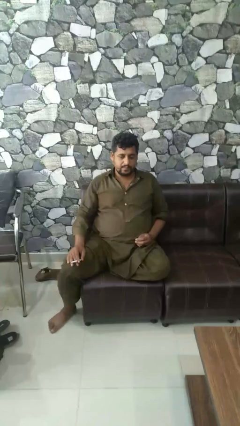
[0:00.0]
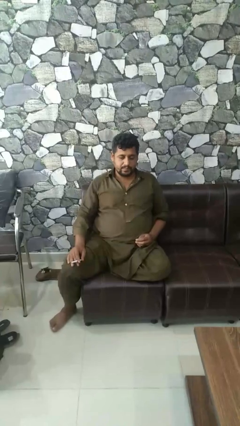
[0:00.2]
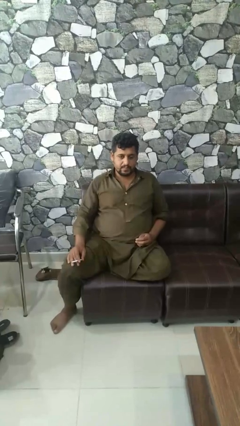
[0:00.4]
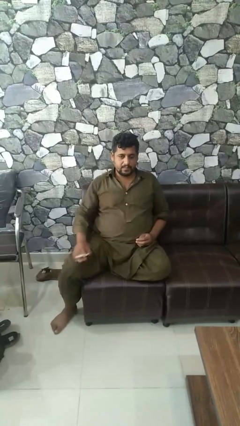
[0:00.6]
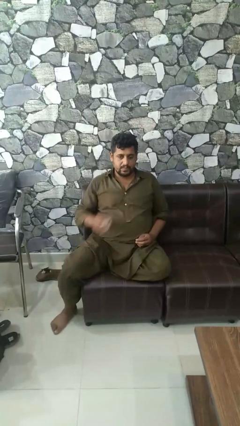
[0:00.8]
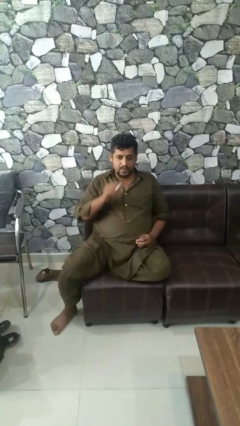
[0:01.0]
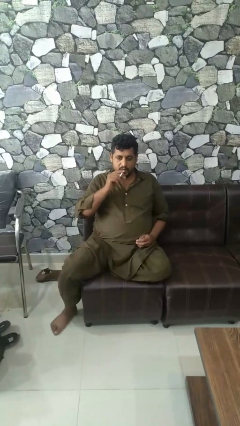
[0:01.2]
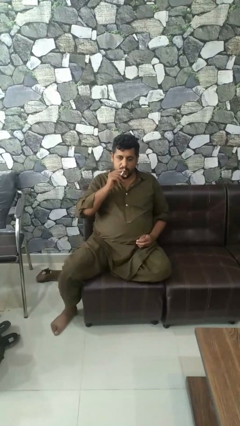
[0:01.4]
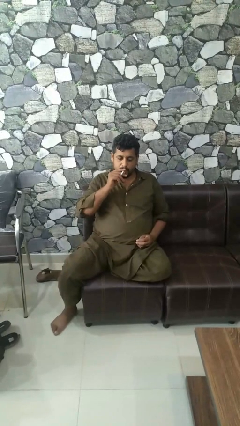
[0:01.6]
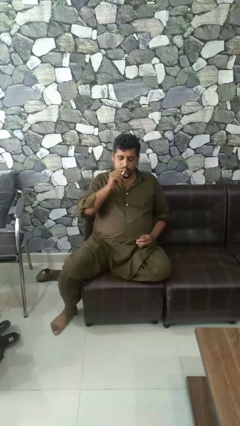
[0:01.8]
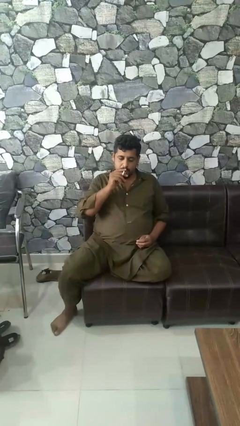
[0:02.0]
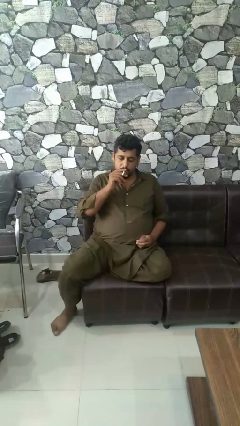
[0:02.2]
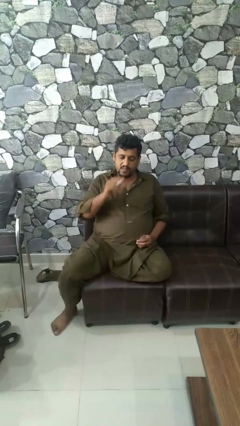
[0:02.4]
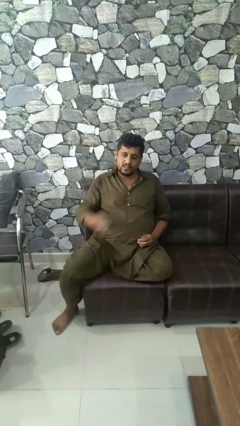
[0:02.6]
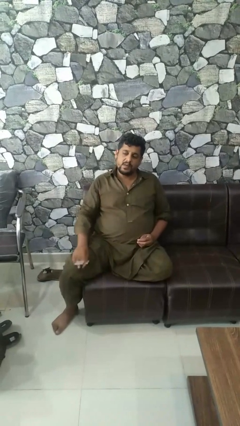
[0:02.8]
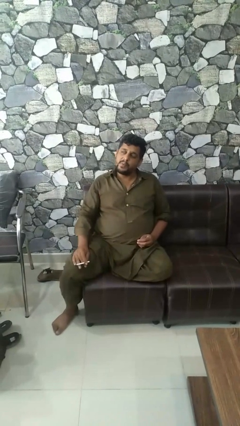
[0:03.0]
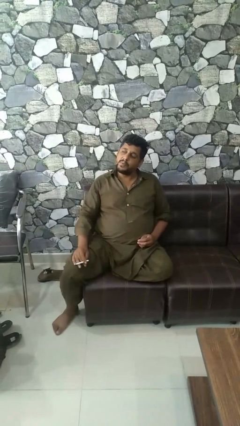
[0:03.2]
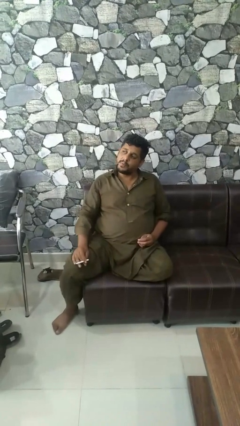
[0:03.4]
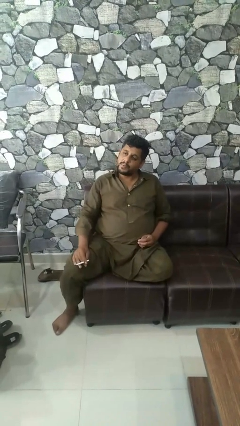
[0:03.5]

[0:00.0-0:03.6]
person vapes

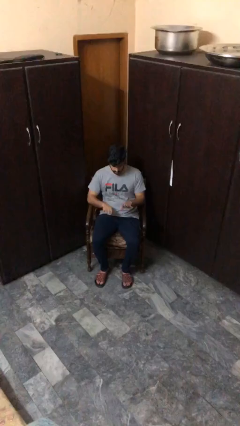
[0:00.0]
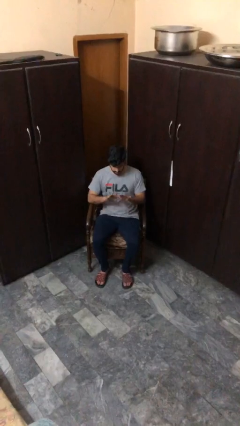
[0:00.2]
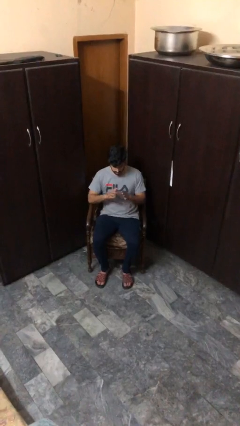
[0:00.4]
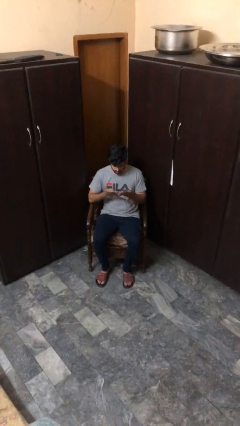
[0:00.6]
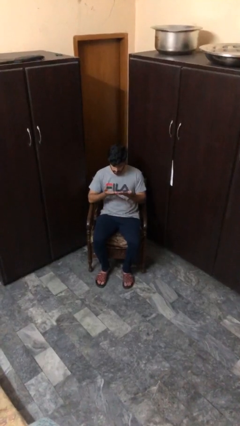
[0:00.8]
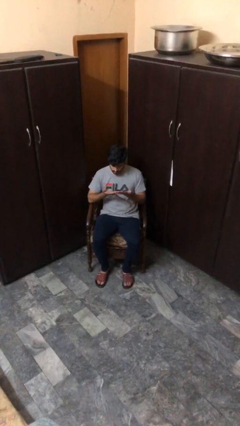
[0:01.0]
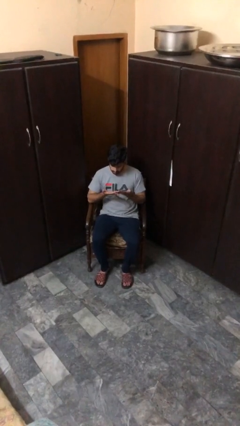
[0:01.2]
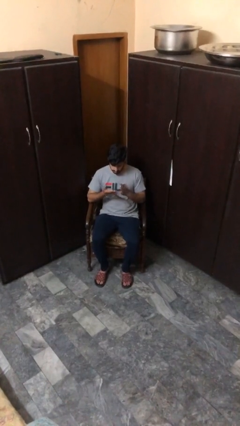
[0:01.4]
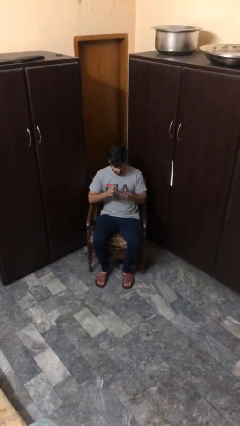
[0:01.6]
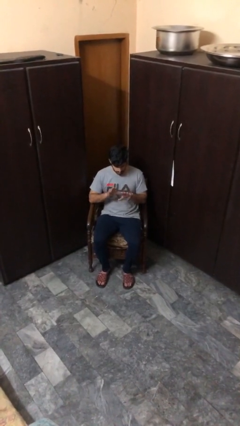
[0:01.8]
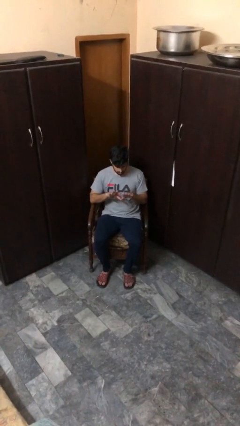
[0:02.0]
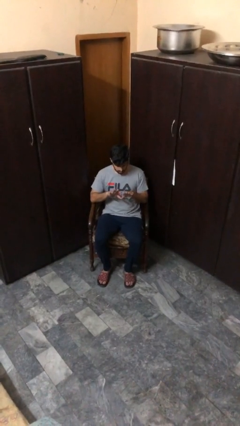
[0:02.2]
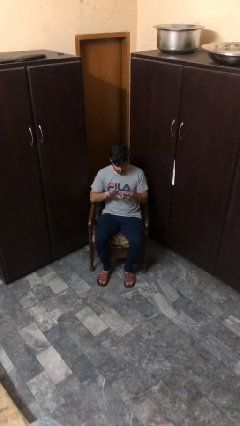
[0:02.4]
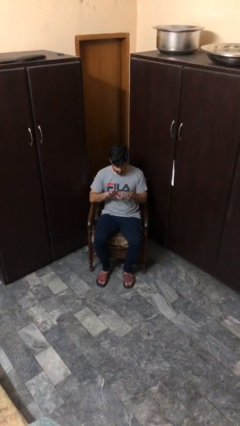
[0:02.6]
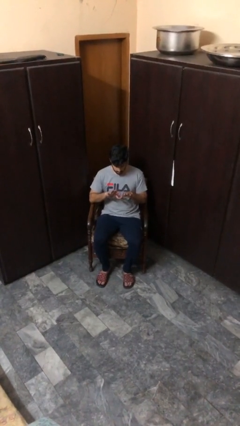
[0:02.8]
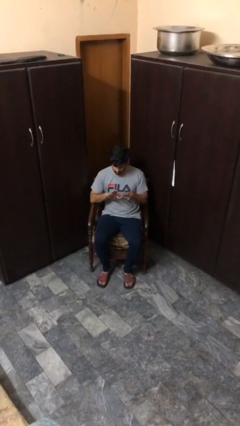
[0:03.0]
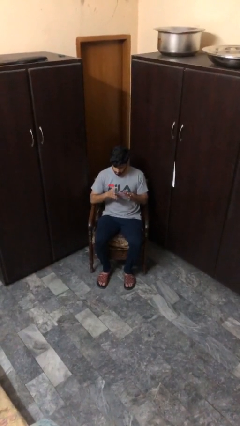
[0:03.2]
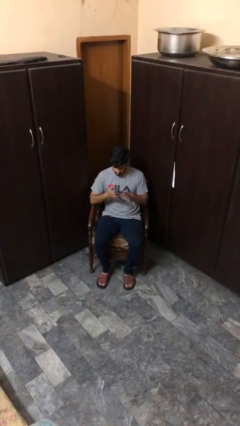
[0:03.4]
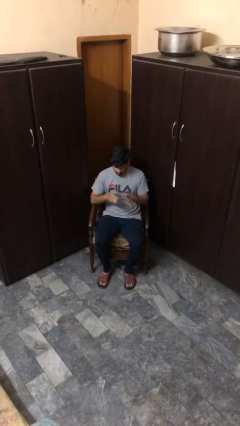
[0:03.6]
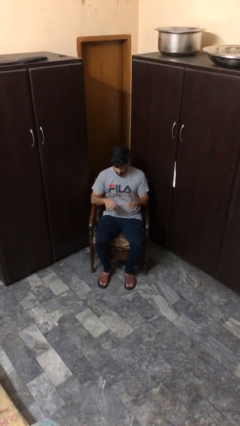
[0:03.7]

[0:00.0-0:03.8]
person looks at hands in lap

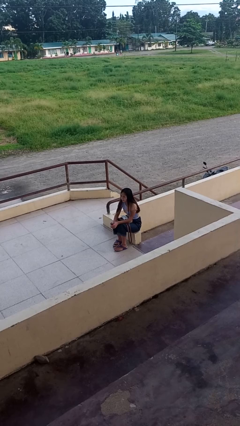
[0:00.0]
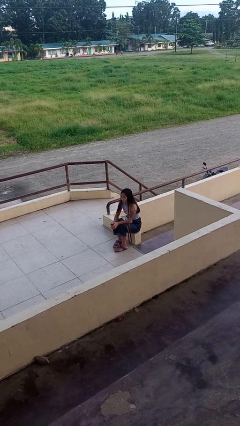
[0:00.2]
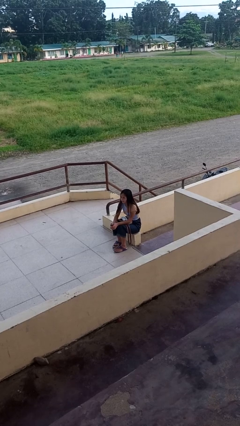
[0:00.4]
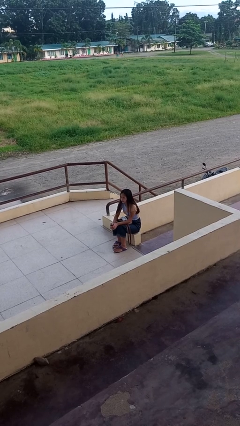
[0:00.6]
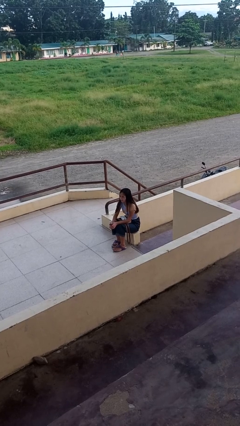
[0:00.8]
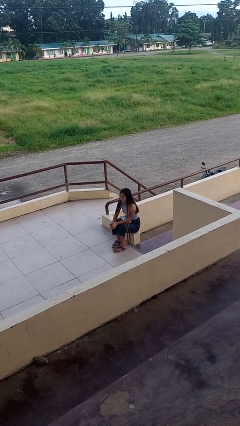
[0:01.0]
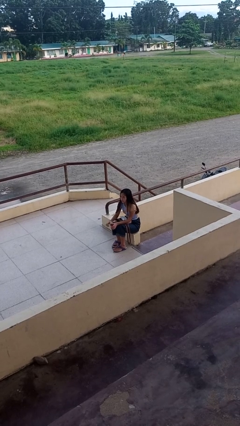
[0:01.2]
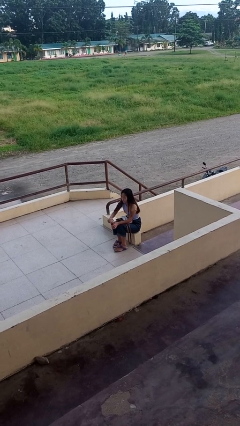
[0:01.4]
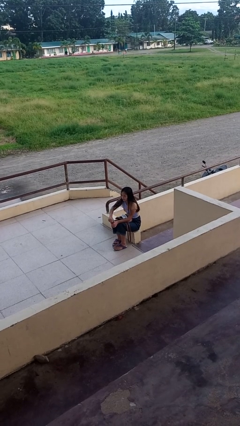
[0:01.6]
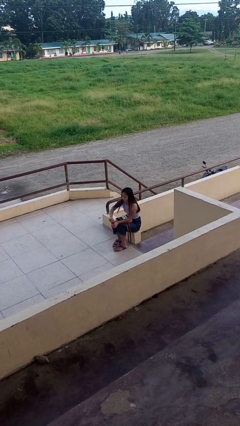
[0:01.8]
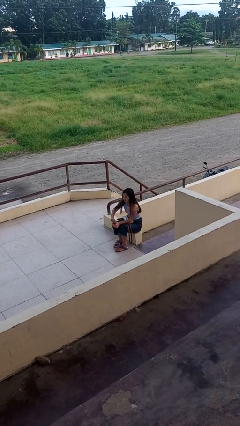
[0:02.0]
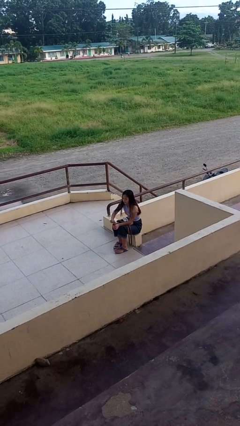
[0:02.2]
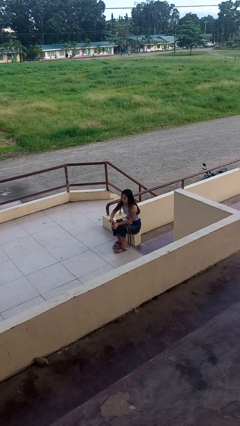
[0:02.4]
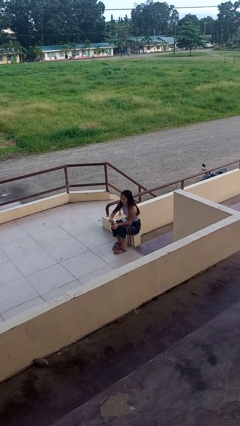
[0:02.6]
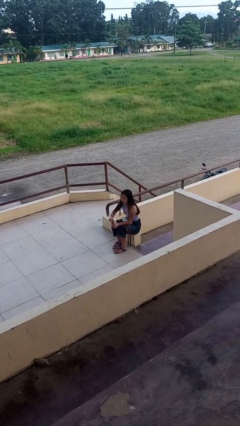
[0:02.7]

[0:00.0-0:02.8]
person opens beverage can

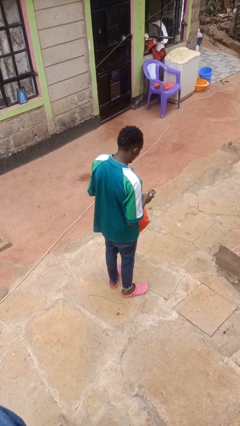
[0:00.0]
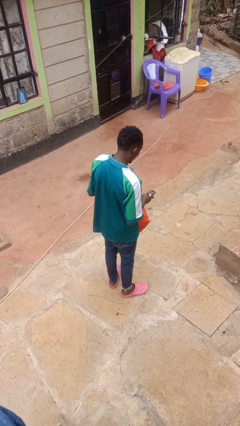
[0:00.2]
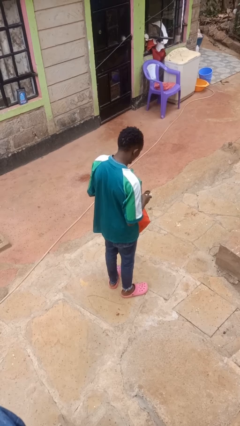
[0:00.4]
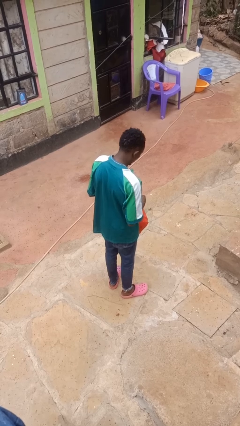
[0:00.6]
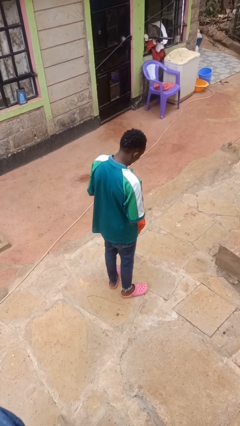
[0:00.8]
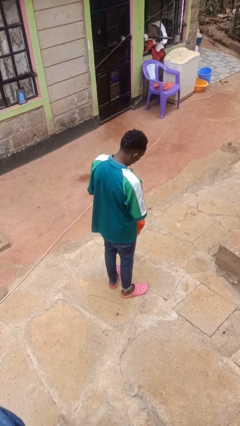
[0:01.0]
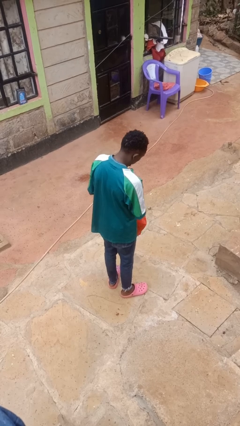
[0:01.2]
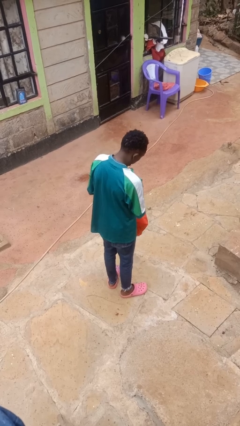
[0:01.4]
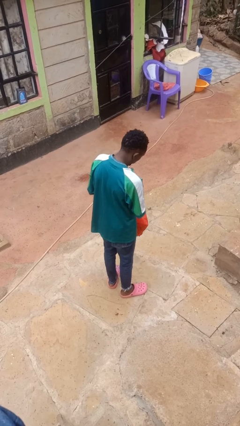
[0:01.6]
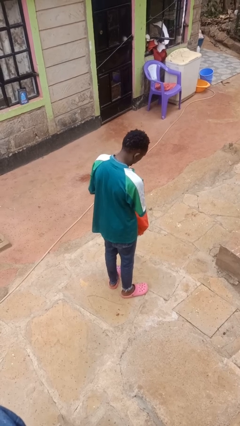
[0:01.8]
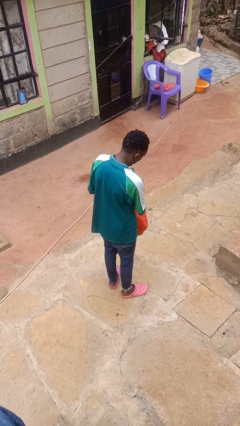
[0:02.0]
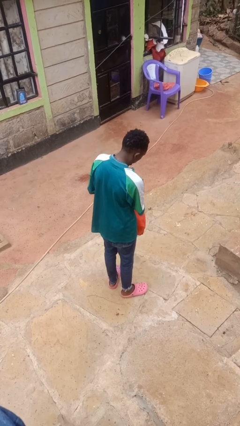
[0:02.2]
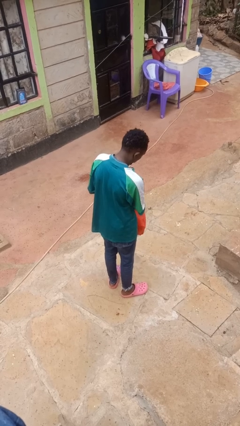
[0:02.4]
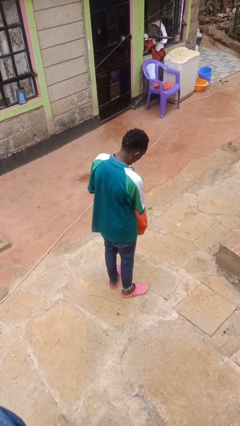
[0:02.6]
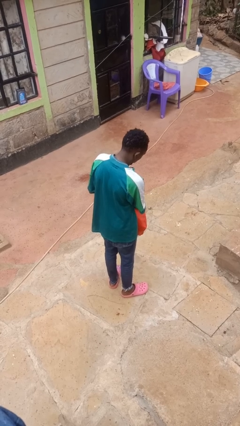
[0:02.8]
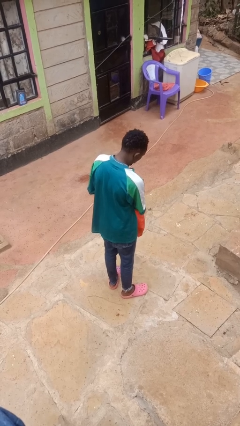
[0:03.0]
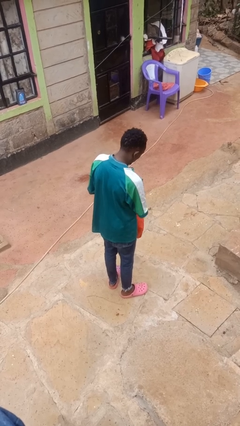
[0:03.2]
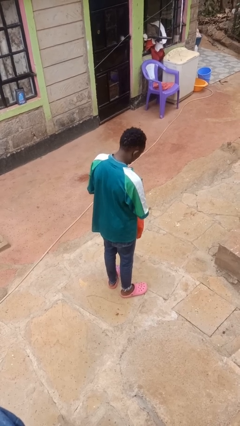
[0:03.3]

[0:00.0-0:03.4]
person puts object into bag

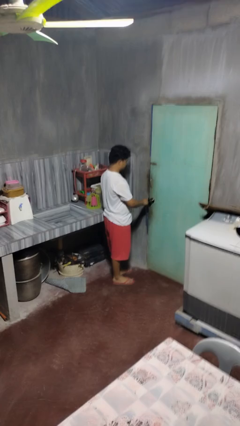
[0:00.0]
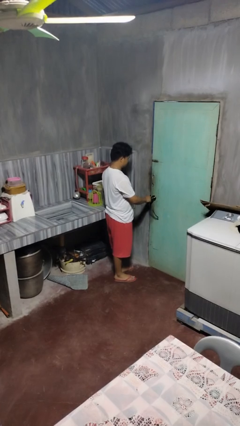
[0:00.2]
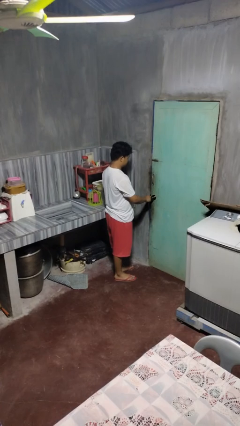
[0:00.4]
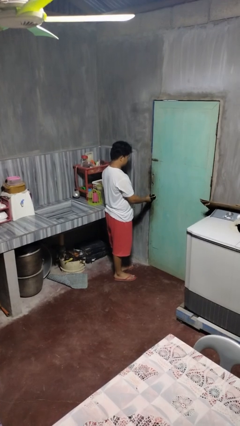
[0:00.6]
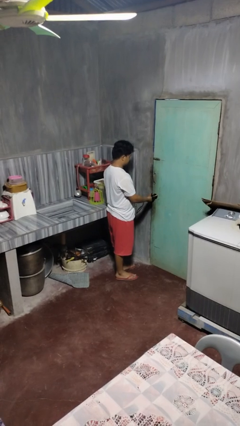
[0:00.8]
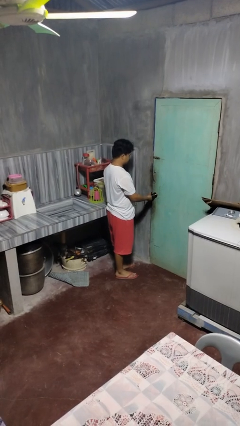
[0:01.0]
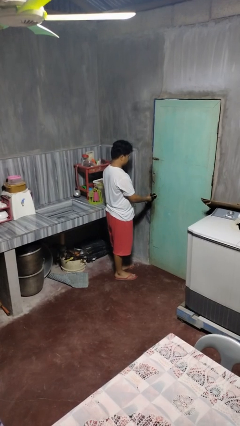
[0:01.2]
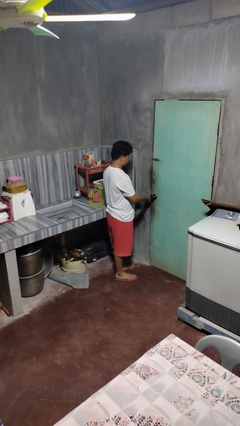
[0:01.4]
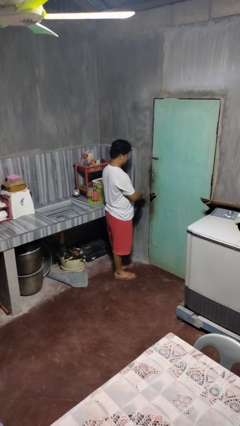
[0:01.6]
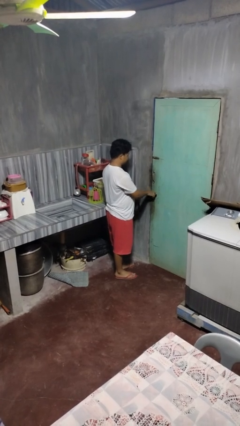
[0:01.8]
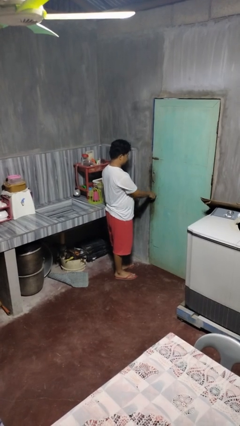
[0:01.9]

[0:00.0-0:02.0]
person unlocks door with keys

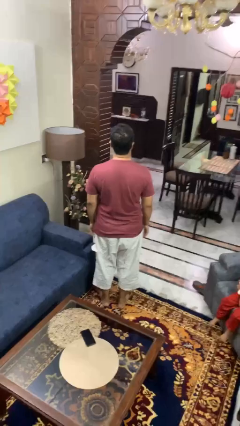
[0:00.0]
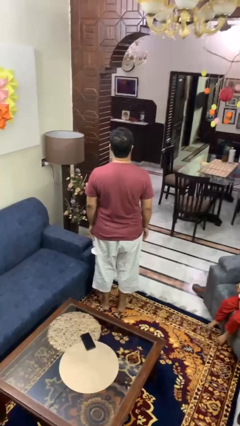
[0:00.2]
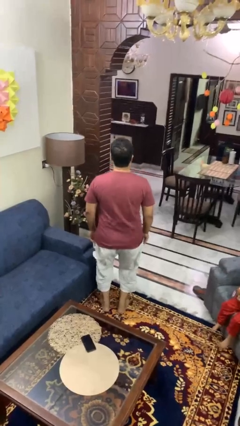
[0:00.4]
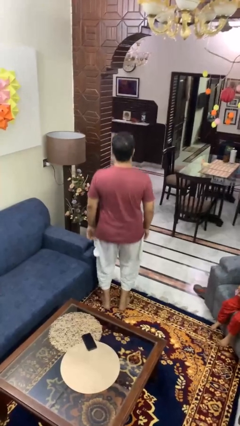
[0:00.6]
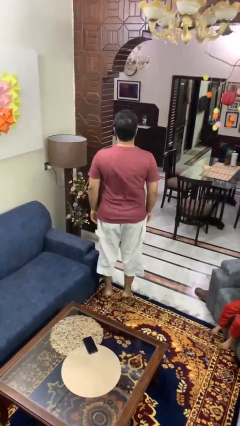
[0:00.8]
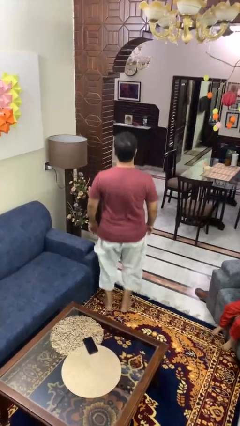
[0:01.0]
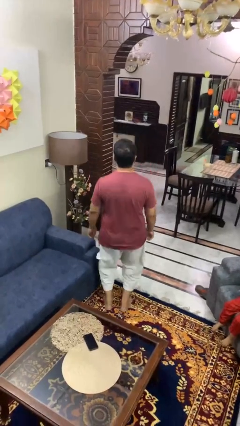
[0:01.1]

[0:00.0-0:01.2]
person jumps

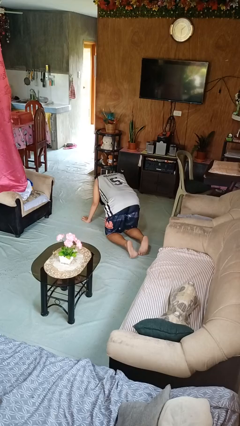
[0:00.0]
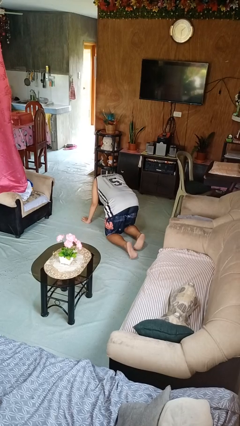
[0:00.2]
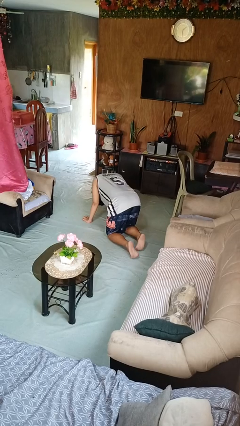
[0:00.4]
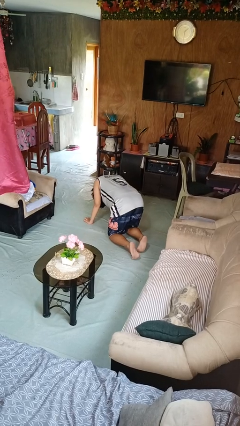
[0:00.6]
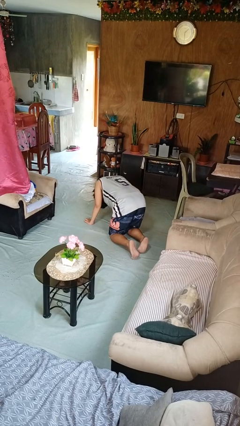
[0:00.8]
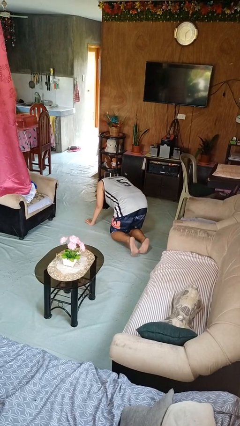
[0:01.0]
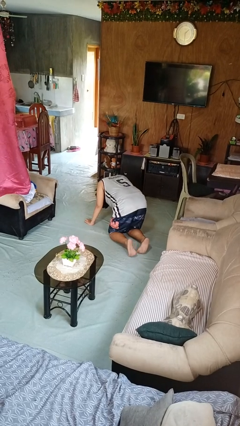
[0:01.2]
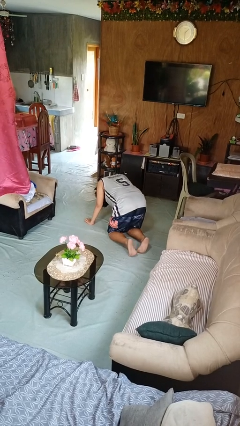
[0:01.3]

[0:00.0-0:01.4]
person crawls
